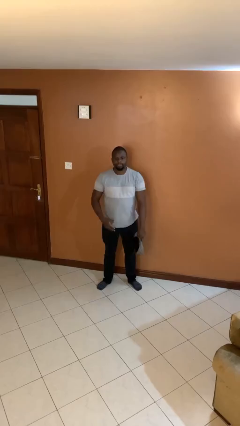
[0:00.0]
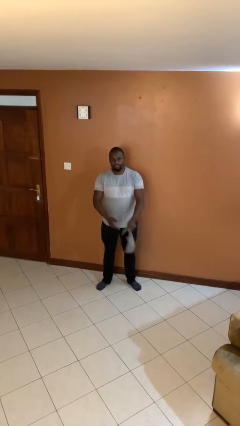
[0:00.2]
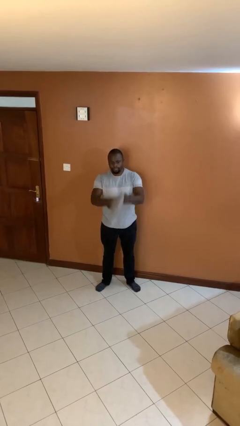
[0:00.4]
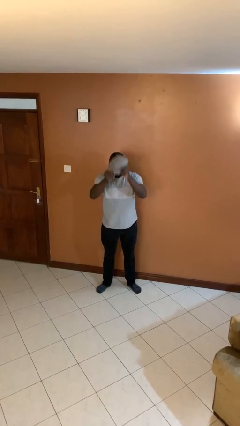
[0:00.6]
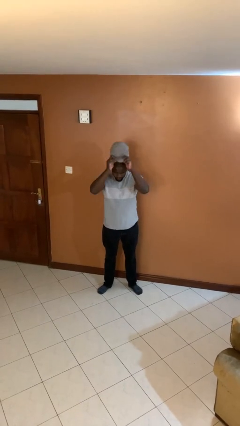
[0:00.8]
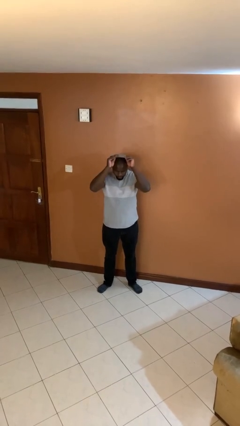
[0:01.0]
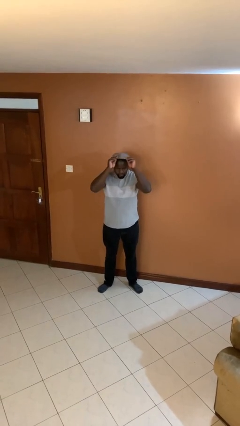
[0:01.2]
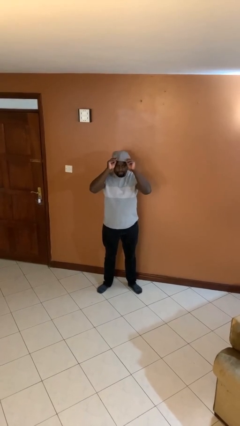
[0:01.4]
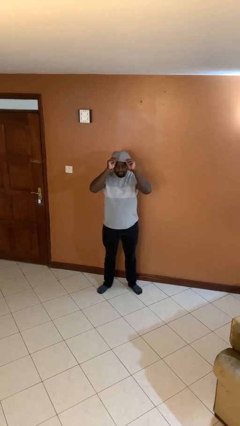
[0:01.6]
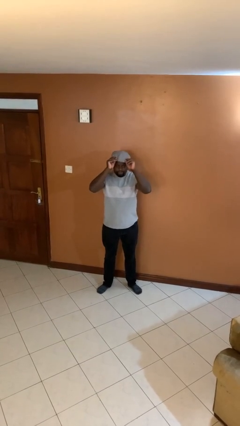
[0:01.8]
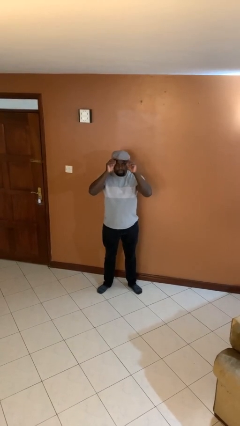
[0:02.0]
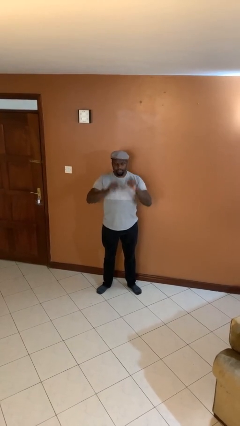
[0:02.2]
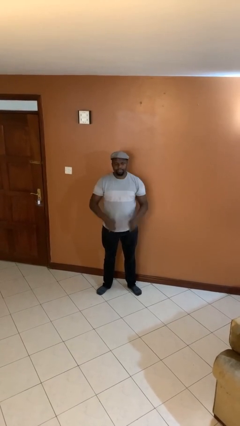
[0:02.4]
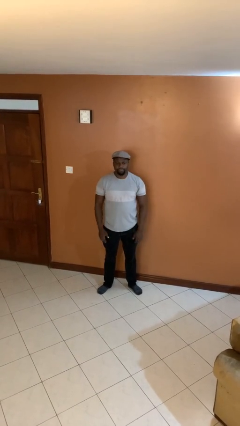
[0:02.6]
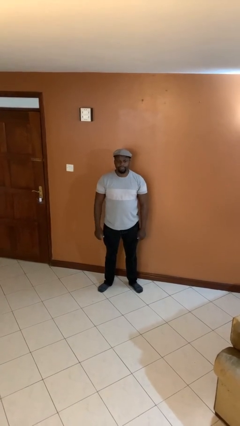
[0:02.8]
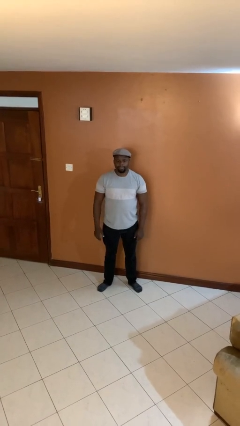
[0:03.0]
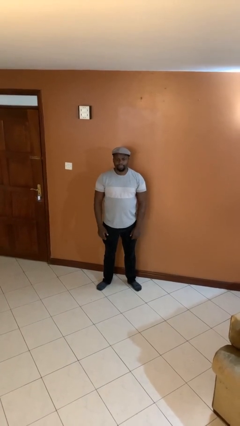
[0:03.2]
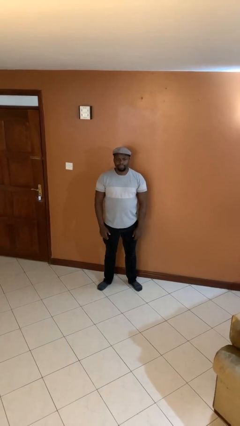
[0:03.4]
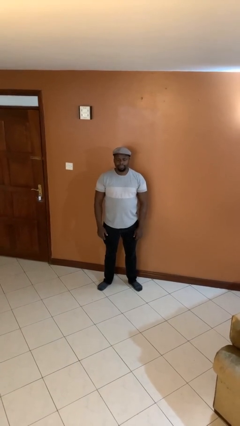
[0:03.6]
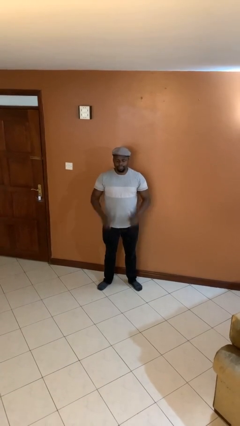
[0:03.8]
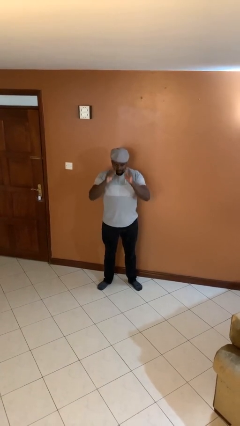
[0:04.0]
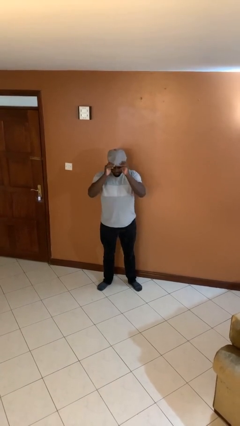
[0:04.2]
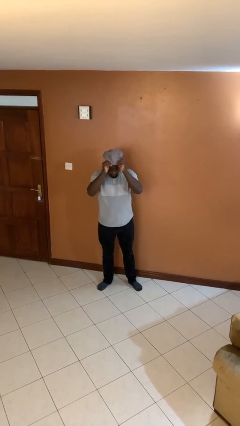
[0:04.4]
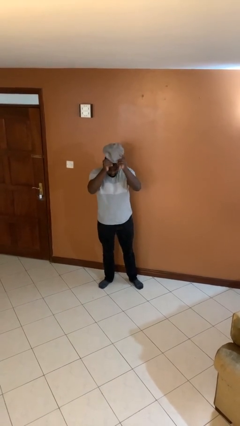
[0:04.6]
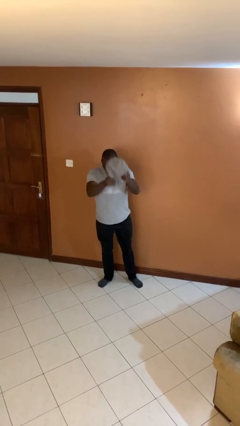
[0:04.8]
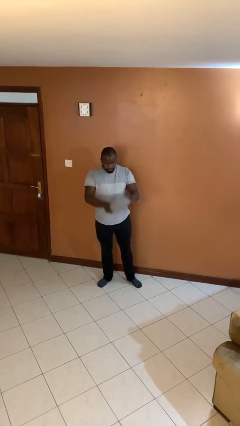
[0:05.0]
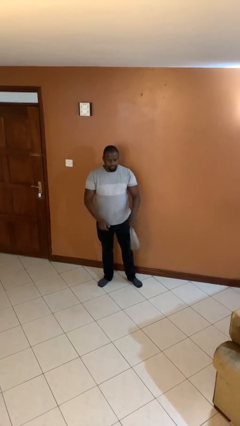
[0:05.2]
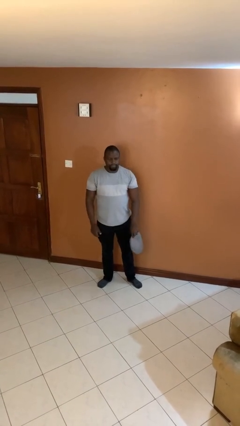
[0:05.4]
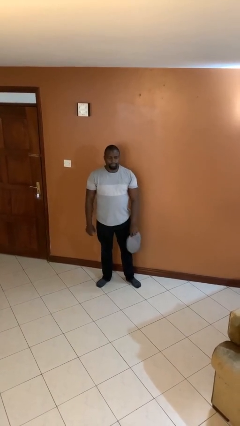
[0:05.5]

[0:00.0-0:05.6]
person puts on hat

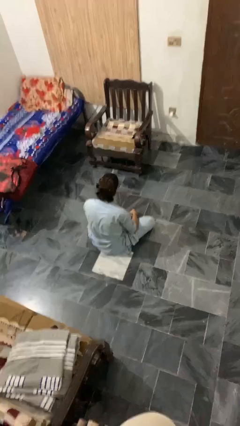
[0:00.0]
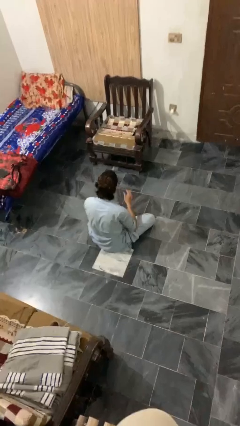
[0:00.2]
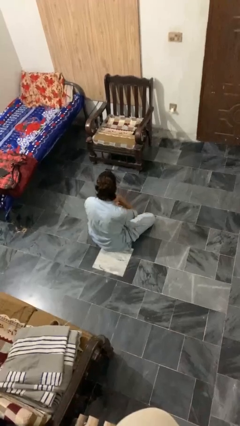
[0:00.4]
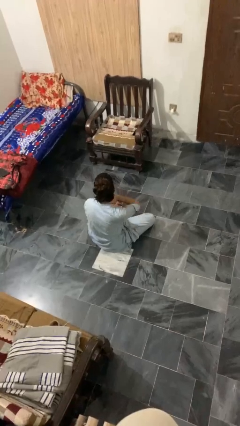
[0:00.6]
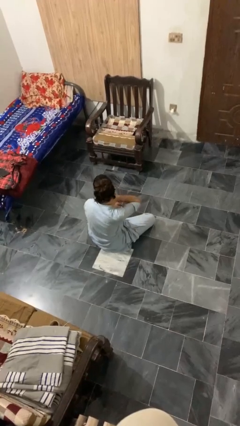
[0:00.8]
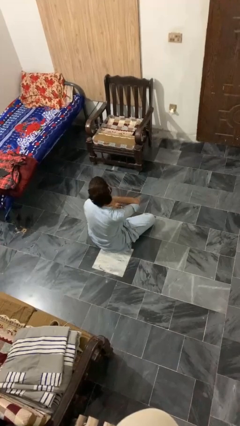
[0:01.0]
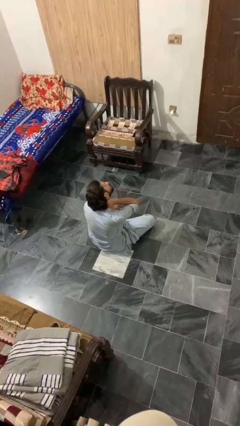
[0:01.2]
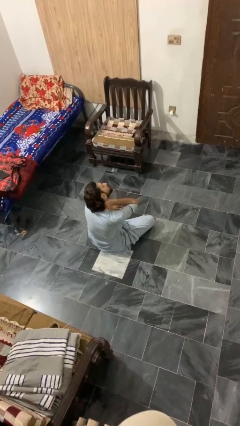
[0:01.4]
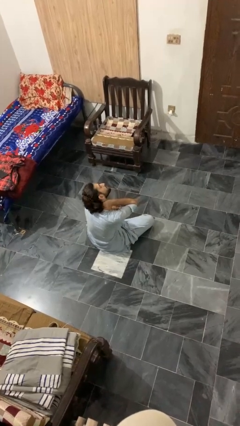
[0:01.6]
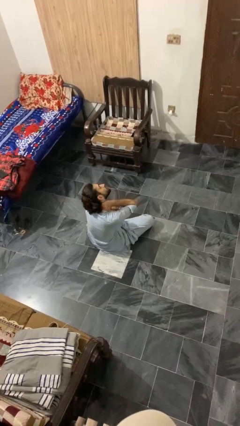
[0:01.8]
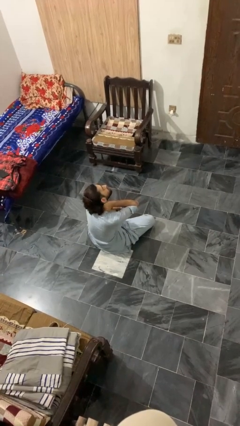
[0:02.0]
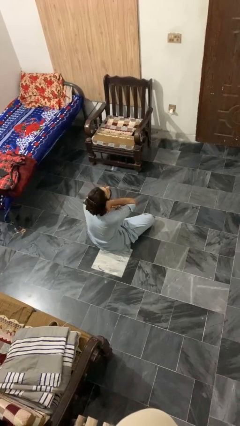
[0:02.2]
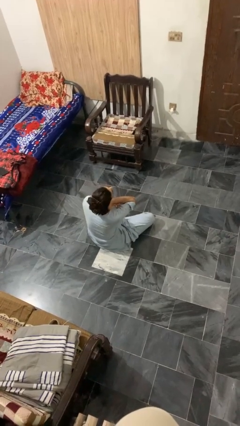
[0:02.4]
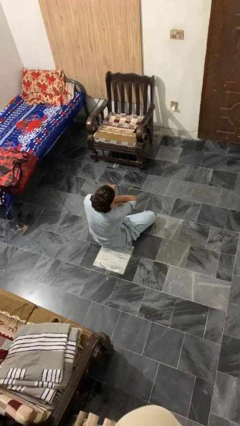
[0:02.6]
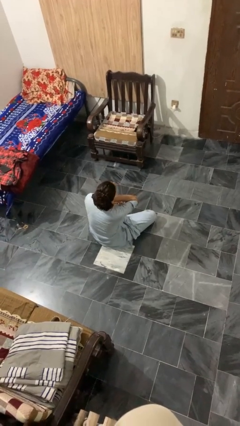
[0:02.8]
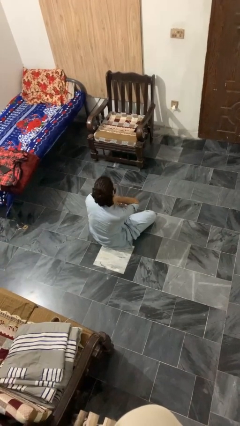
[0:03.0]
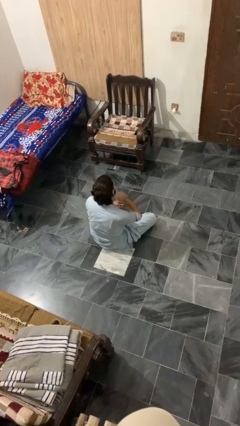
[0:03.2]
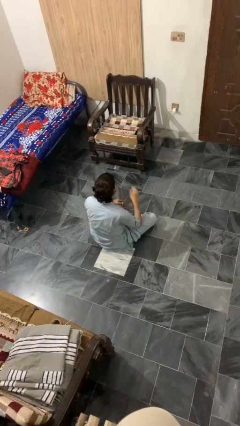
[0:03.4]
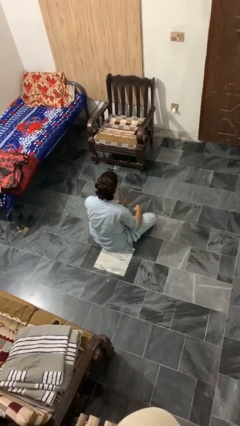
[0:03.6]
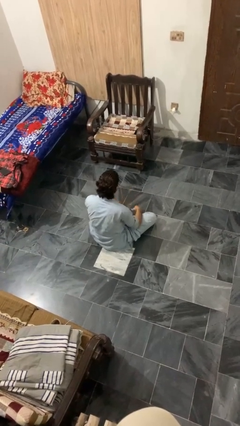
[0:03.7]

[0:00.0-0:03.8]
person rubs neck

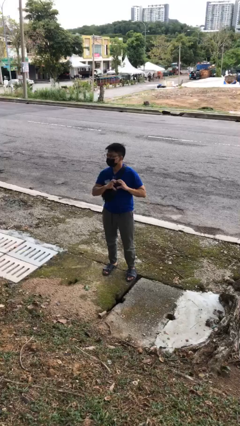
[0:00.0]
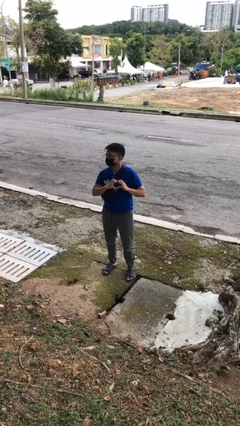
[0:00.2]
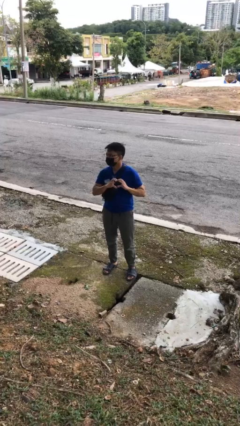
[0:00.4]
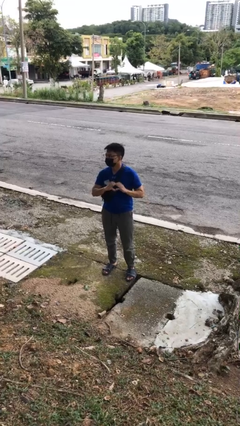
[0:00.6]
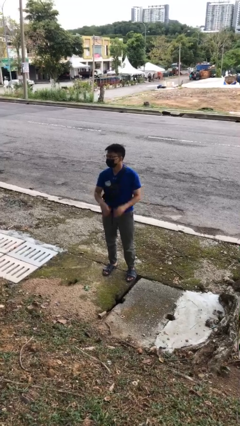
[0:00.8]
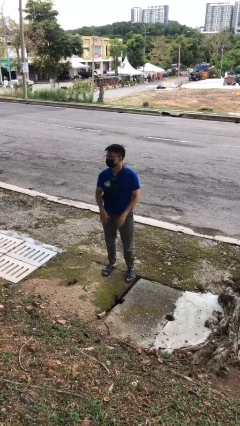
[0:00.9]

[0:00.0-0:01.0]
person gestures heart

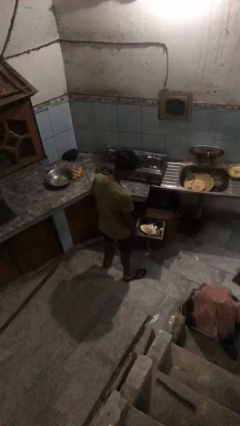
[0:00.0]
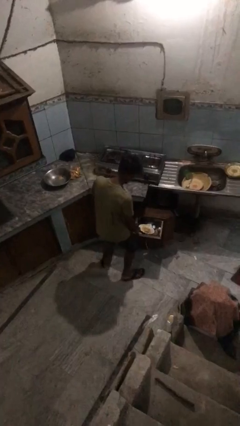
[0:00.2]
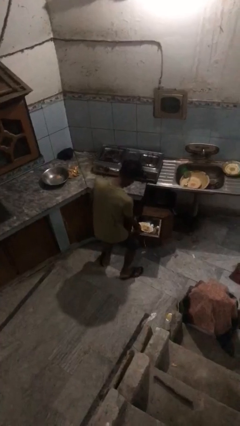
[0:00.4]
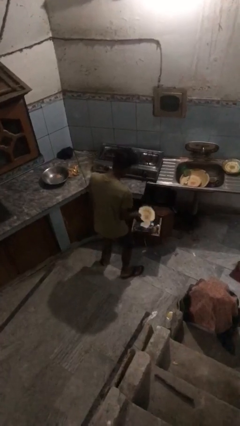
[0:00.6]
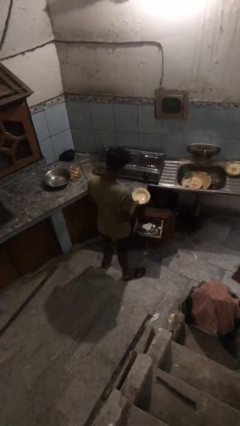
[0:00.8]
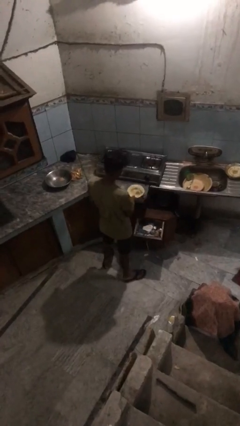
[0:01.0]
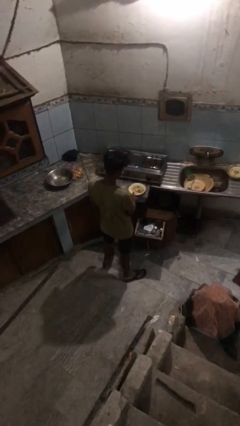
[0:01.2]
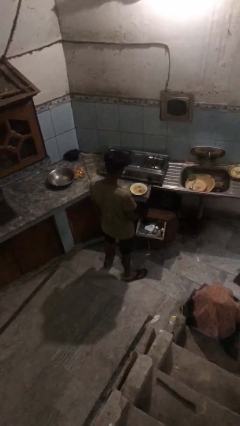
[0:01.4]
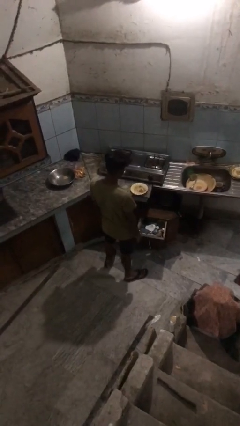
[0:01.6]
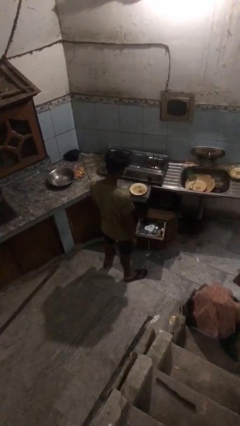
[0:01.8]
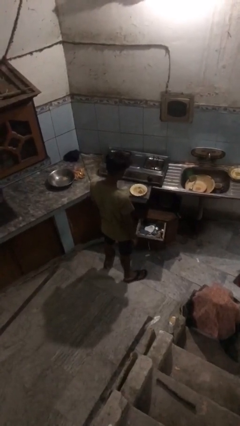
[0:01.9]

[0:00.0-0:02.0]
person takes object from kitchen drawer

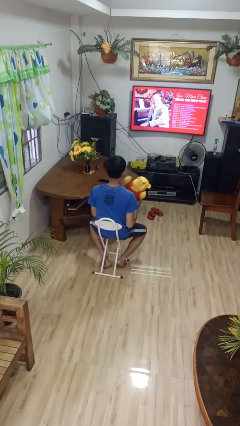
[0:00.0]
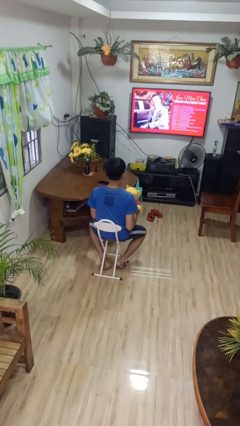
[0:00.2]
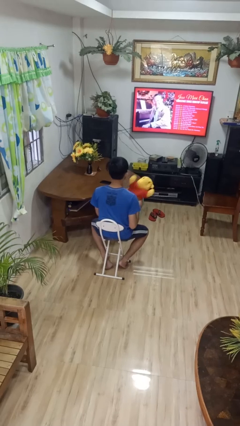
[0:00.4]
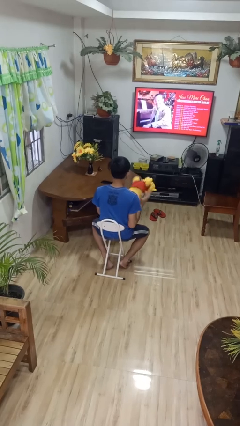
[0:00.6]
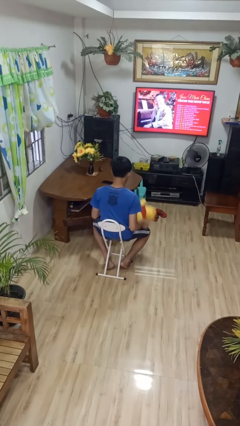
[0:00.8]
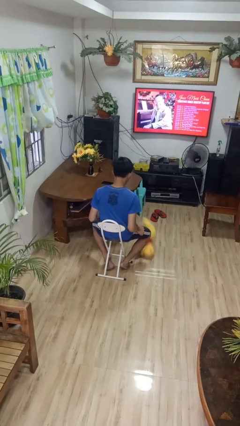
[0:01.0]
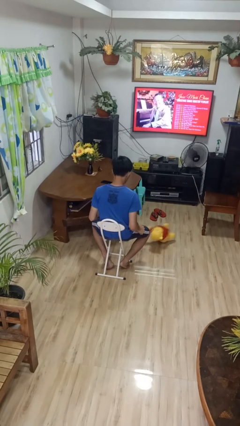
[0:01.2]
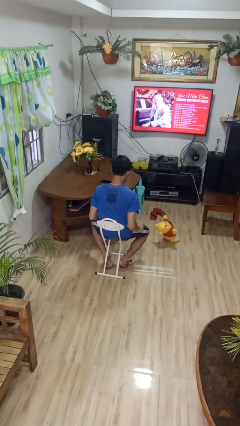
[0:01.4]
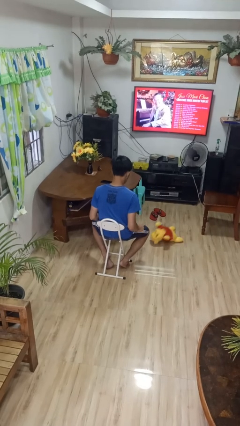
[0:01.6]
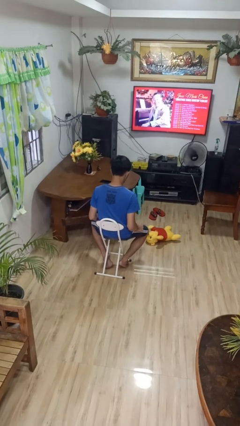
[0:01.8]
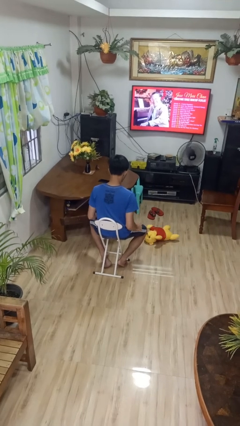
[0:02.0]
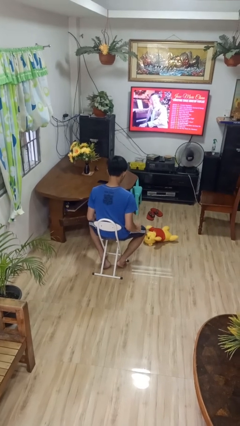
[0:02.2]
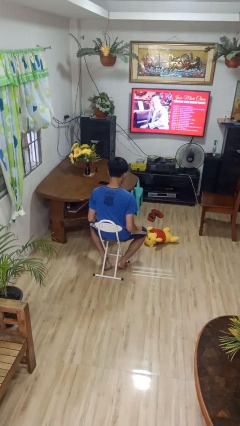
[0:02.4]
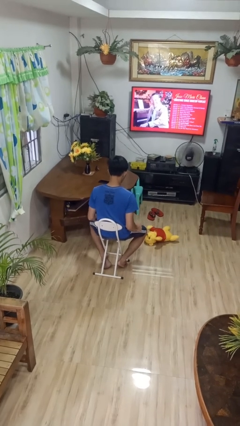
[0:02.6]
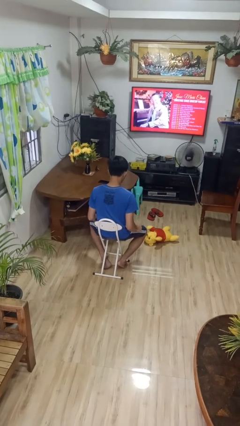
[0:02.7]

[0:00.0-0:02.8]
person drops object

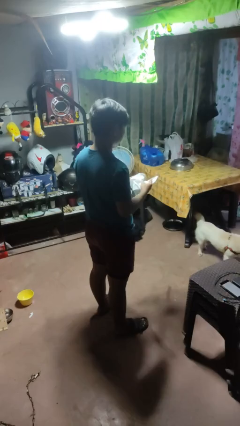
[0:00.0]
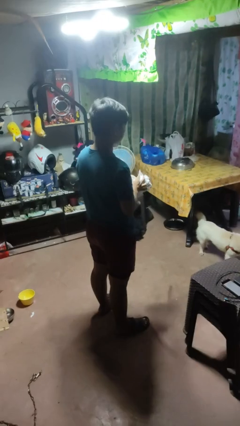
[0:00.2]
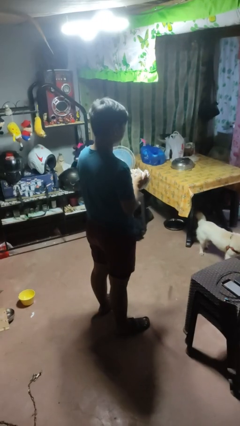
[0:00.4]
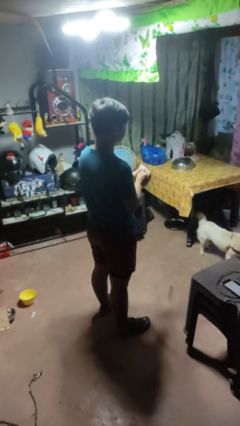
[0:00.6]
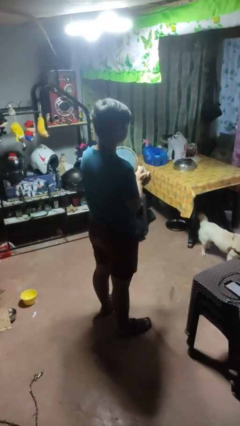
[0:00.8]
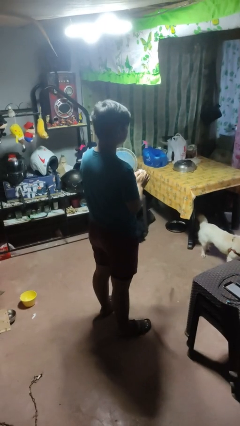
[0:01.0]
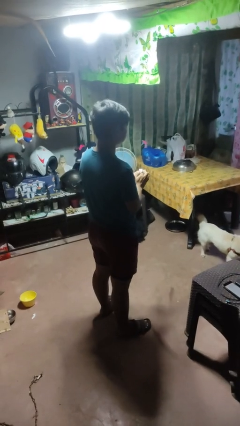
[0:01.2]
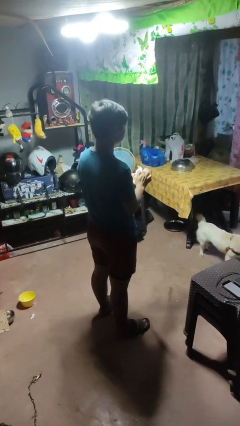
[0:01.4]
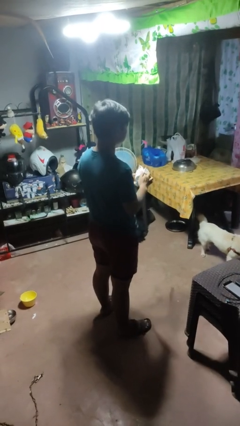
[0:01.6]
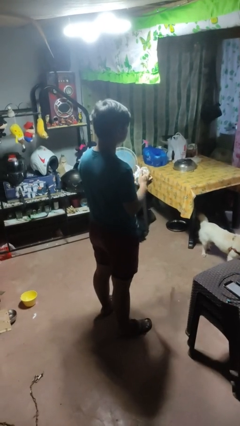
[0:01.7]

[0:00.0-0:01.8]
person crumples paper

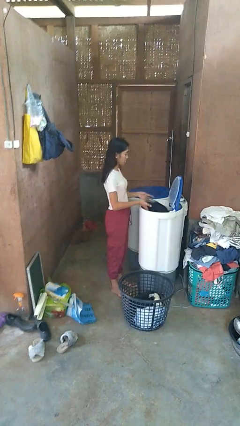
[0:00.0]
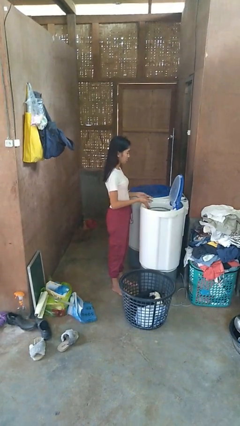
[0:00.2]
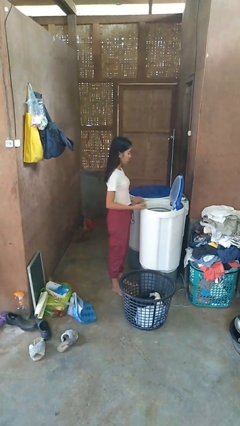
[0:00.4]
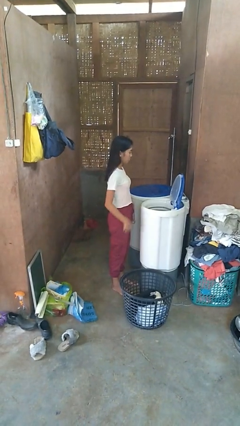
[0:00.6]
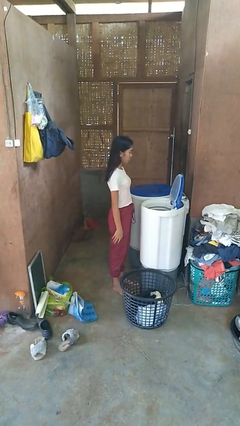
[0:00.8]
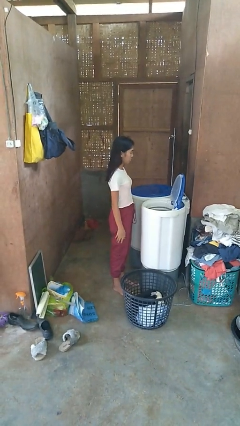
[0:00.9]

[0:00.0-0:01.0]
person loads dryer
